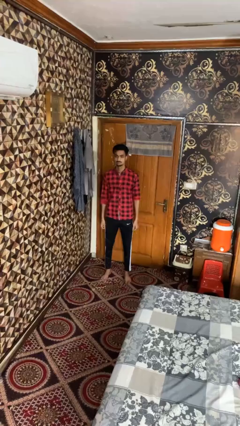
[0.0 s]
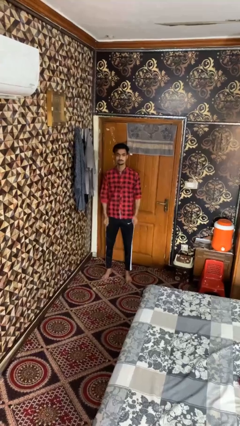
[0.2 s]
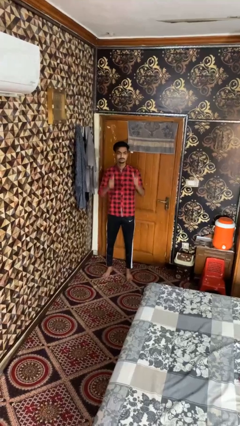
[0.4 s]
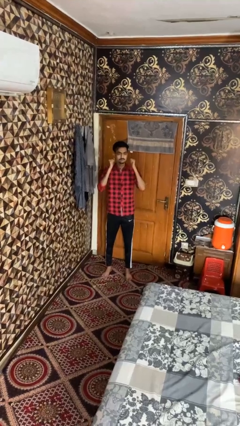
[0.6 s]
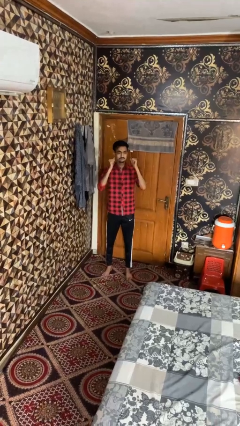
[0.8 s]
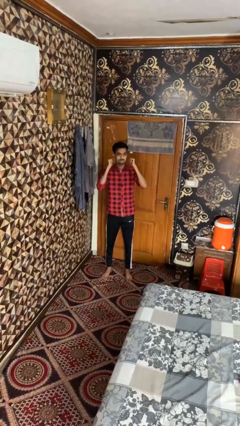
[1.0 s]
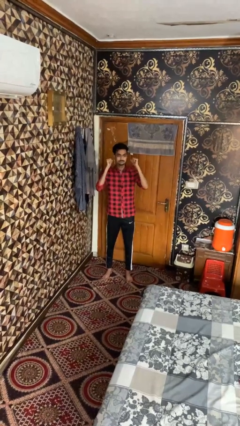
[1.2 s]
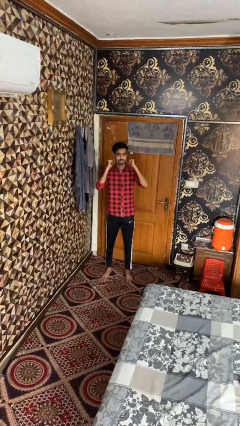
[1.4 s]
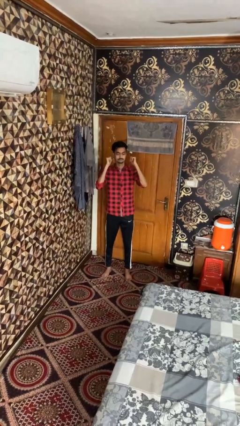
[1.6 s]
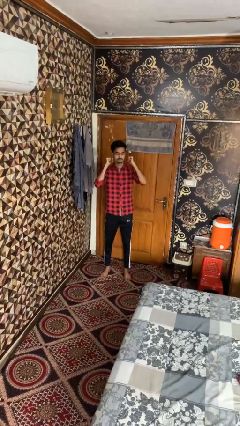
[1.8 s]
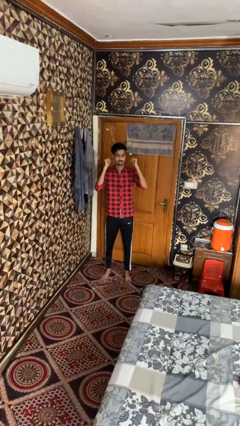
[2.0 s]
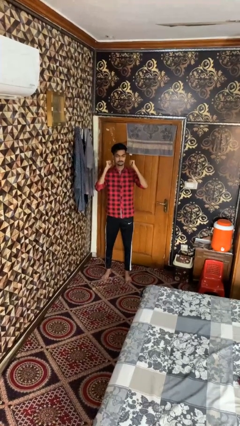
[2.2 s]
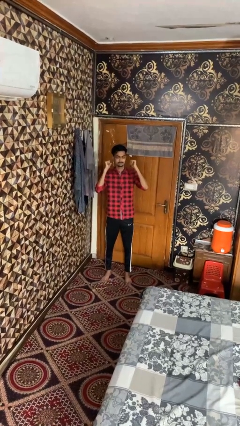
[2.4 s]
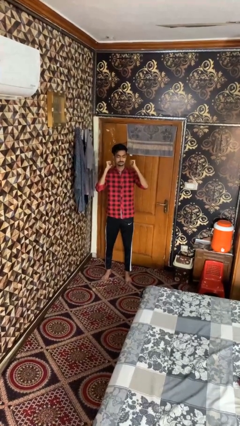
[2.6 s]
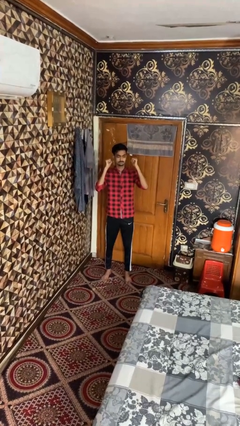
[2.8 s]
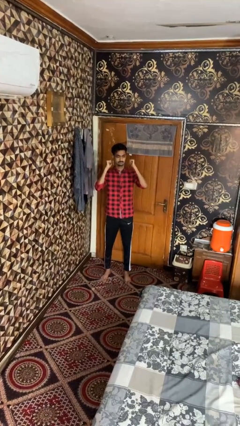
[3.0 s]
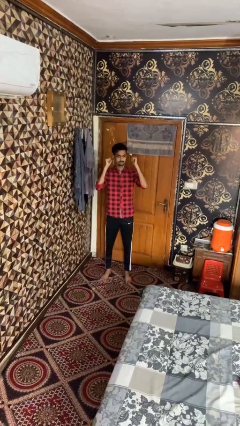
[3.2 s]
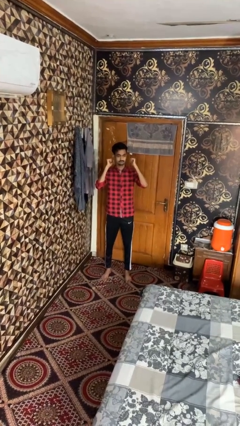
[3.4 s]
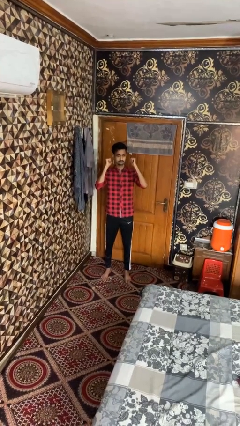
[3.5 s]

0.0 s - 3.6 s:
person gestures behind me

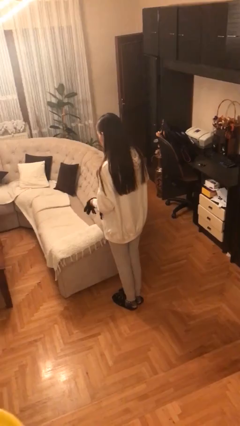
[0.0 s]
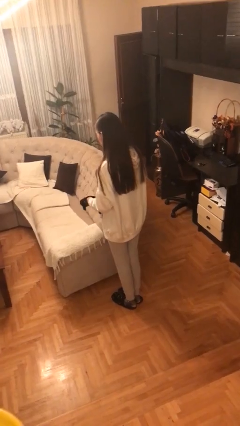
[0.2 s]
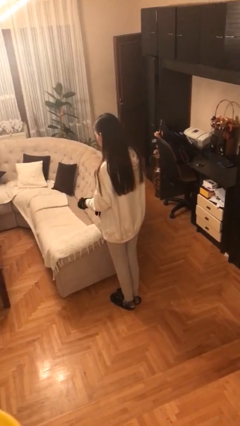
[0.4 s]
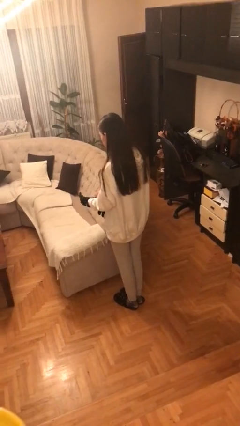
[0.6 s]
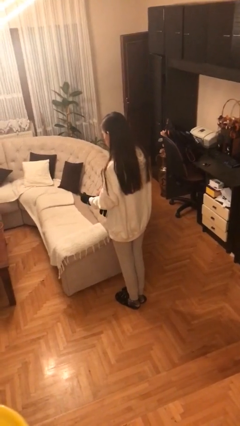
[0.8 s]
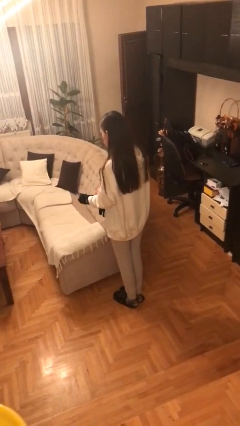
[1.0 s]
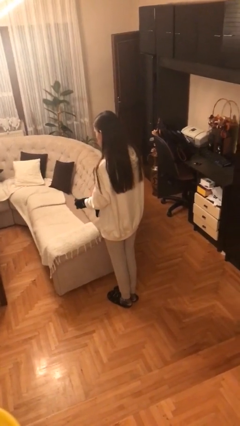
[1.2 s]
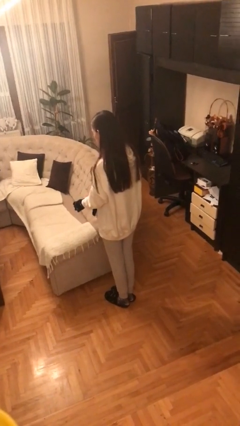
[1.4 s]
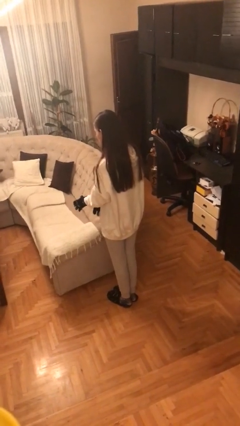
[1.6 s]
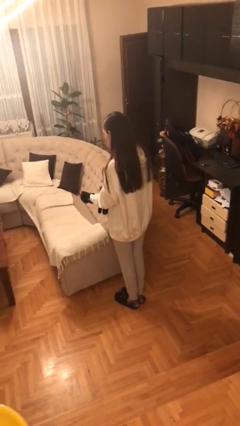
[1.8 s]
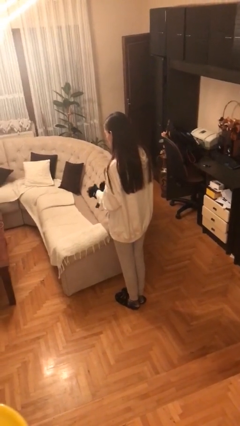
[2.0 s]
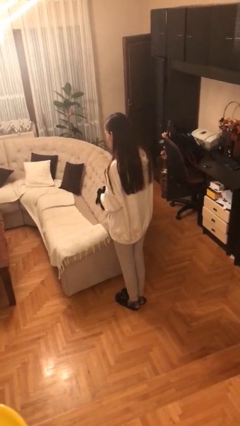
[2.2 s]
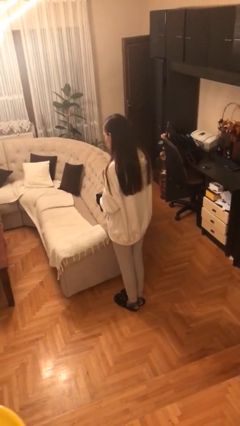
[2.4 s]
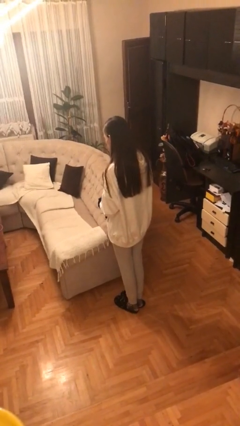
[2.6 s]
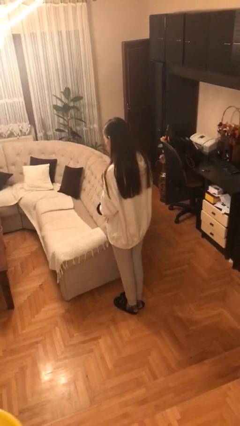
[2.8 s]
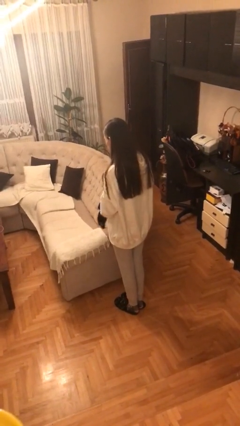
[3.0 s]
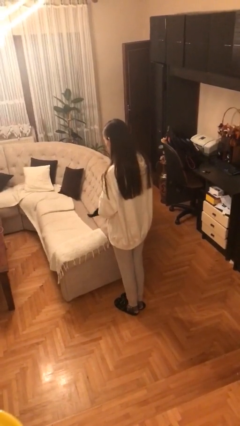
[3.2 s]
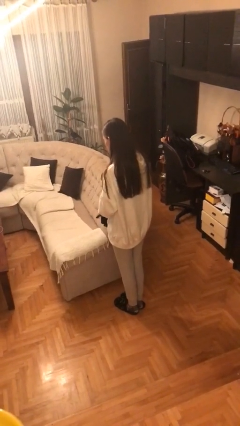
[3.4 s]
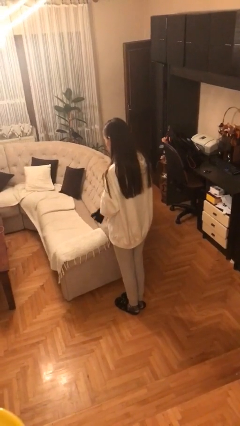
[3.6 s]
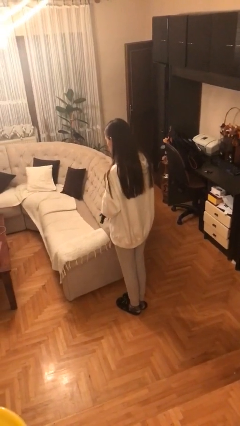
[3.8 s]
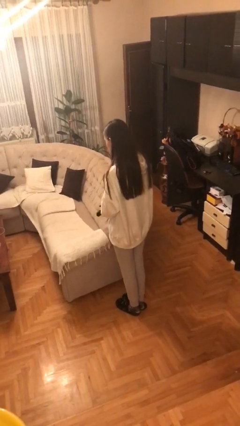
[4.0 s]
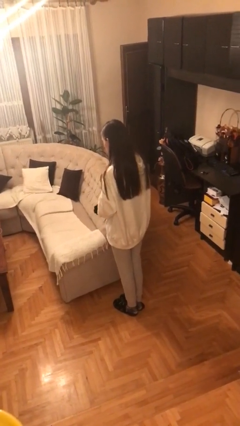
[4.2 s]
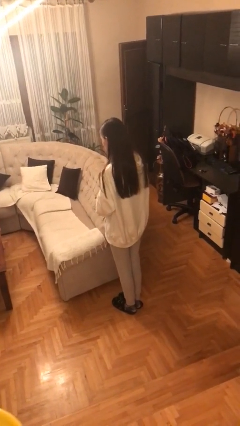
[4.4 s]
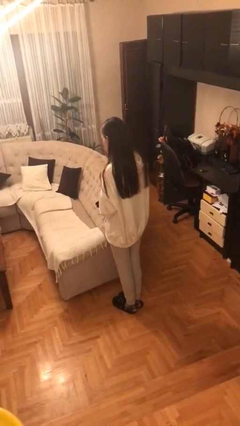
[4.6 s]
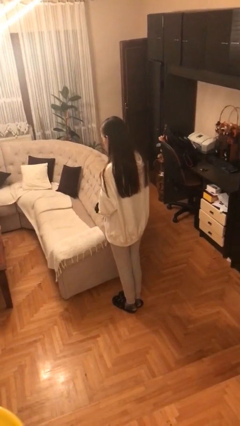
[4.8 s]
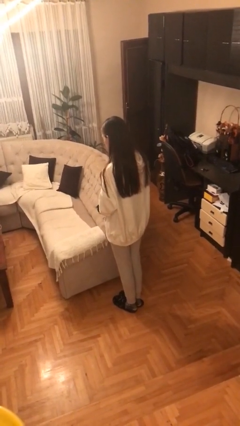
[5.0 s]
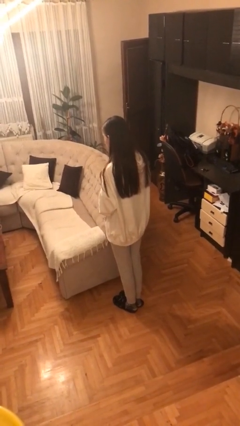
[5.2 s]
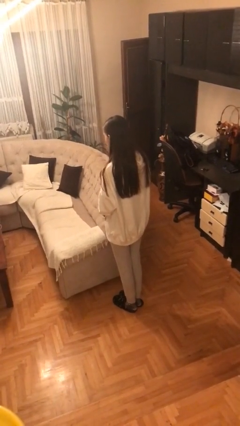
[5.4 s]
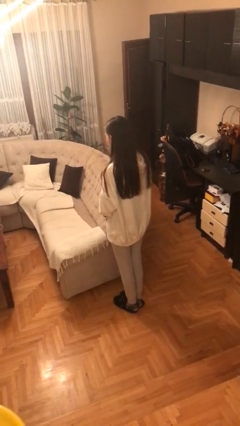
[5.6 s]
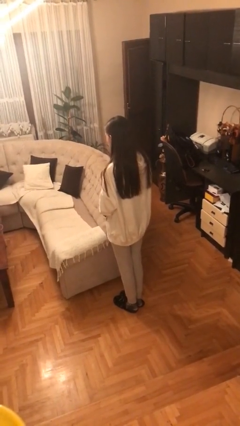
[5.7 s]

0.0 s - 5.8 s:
person puts on gloves

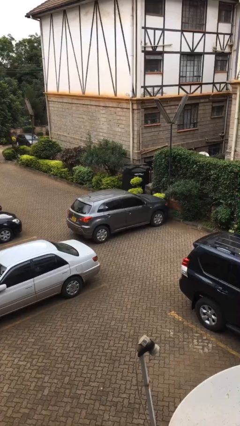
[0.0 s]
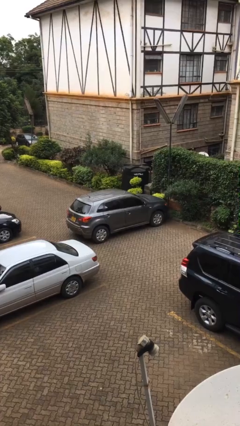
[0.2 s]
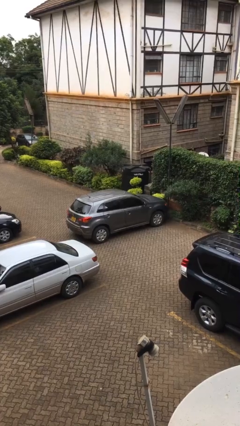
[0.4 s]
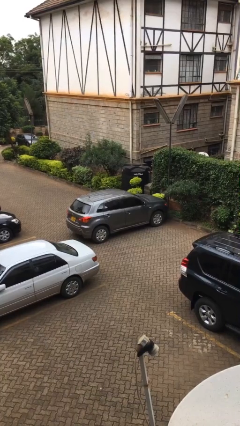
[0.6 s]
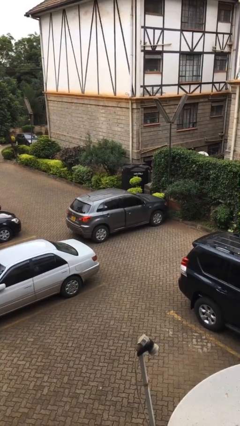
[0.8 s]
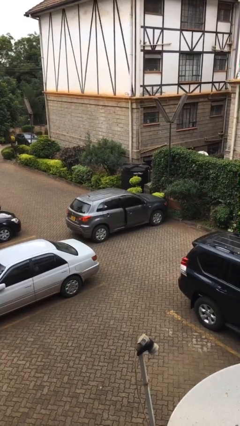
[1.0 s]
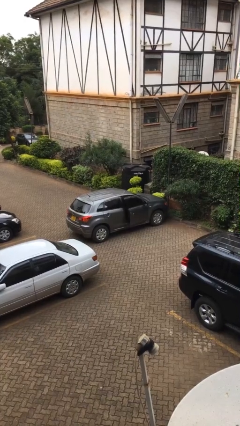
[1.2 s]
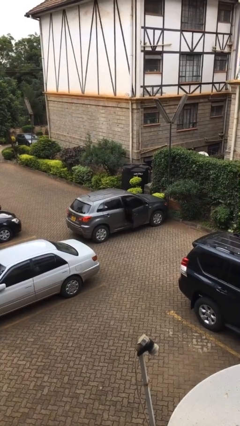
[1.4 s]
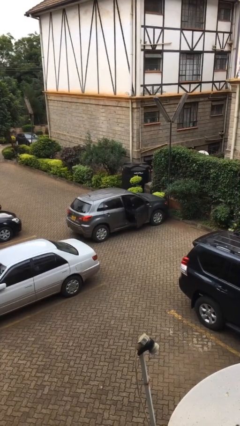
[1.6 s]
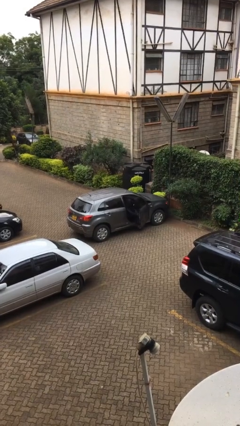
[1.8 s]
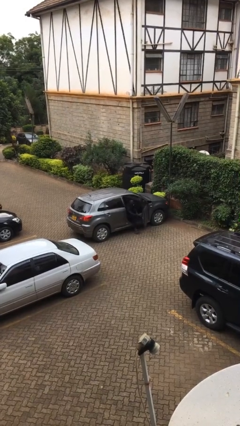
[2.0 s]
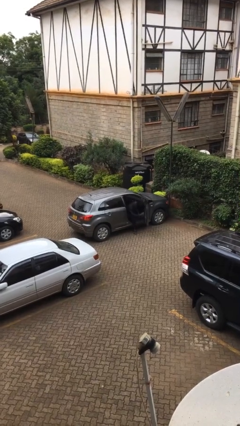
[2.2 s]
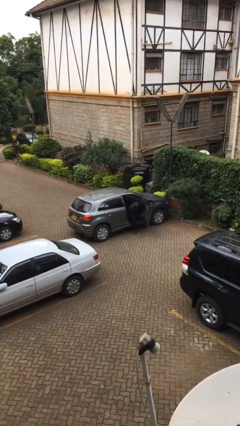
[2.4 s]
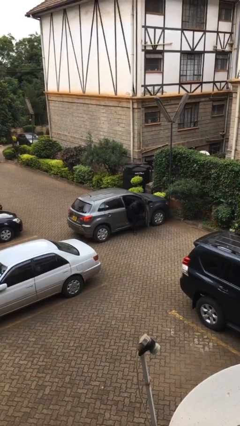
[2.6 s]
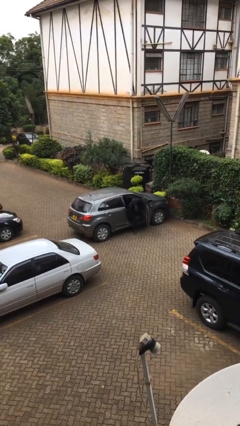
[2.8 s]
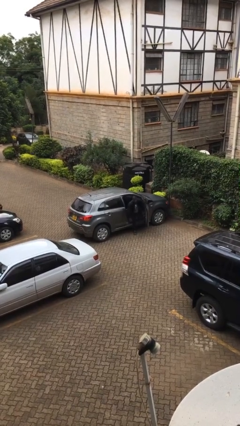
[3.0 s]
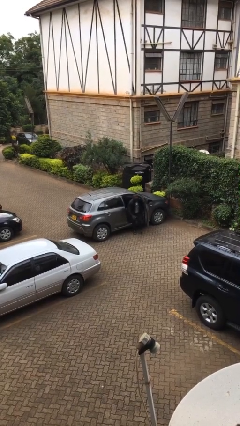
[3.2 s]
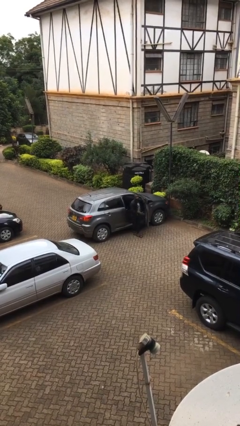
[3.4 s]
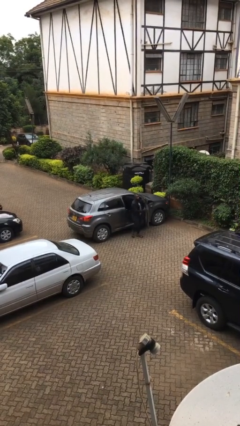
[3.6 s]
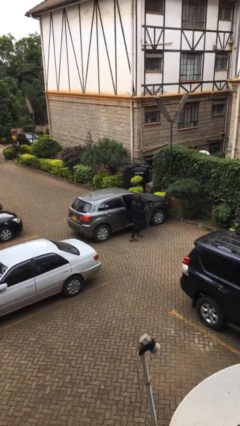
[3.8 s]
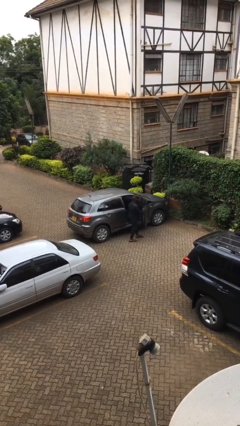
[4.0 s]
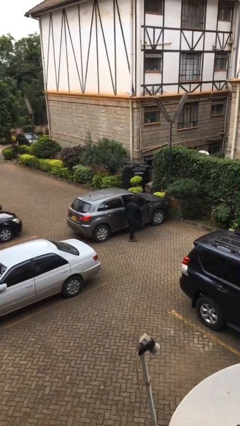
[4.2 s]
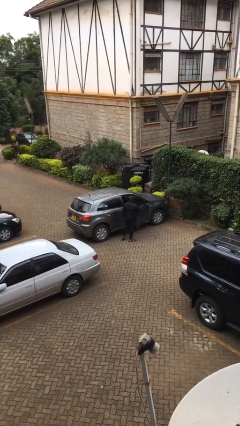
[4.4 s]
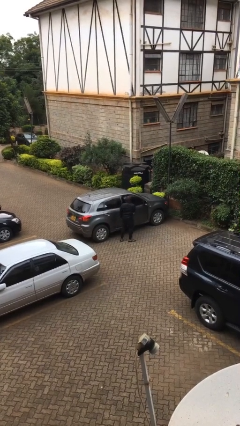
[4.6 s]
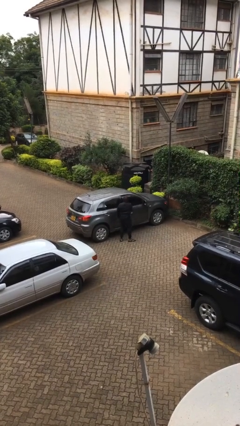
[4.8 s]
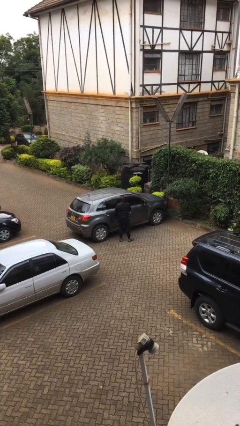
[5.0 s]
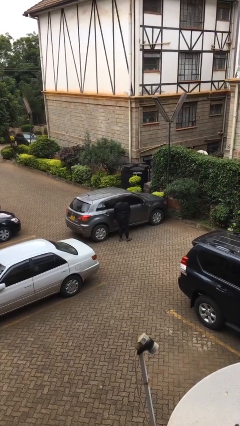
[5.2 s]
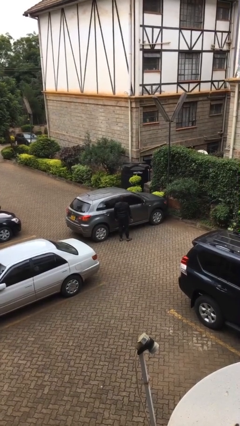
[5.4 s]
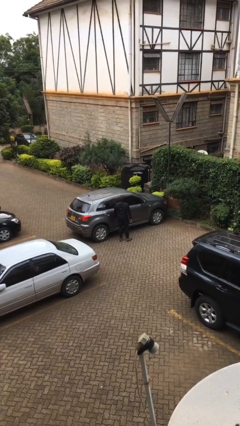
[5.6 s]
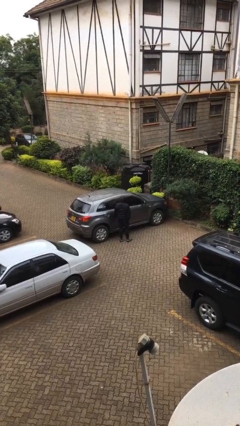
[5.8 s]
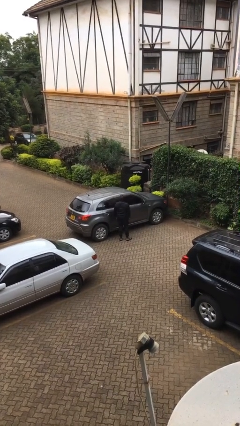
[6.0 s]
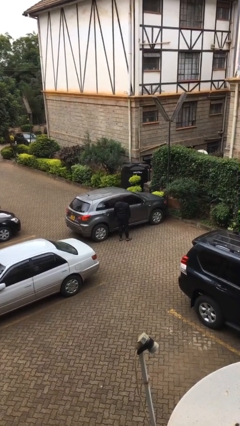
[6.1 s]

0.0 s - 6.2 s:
car drops off person

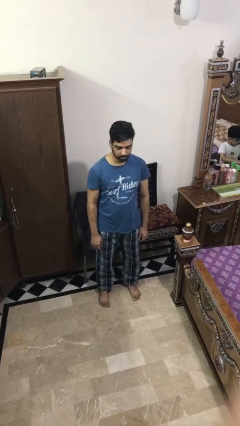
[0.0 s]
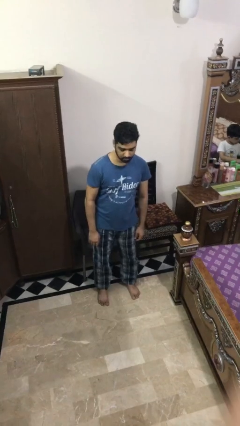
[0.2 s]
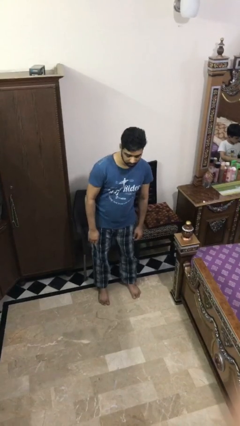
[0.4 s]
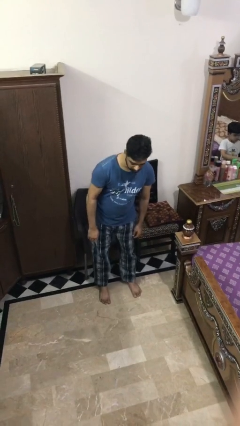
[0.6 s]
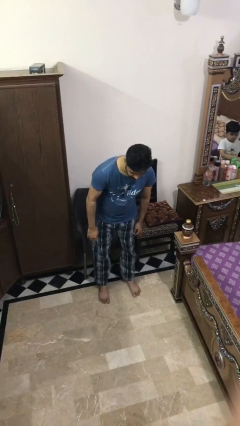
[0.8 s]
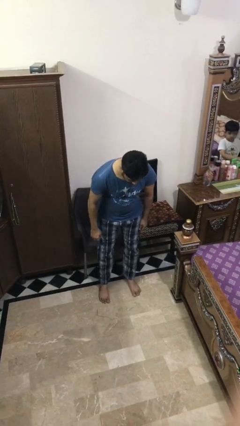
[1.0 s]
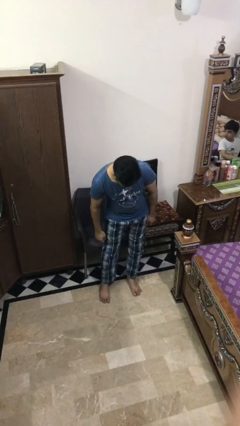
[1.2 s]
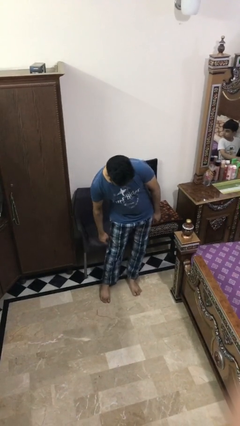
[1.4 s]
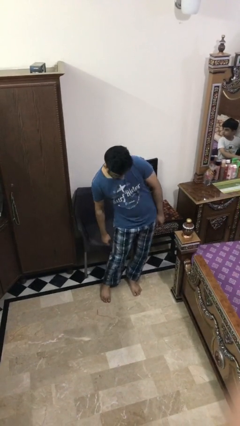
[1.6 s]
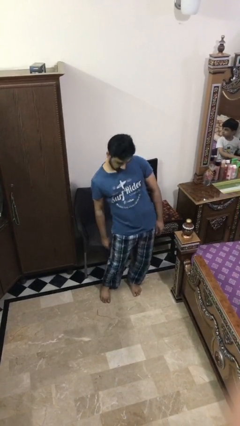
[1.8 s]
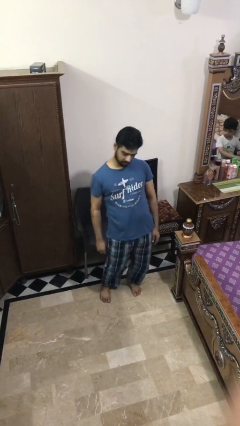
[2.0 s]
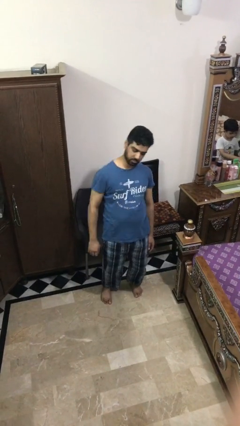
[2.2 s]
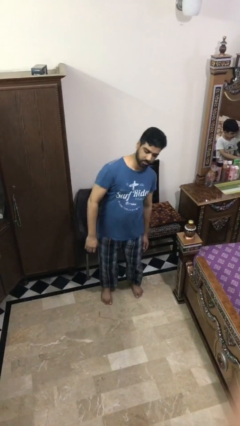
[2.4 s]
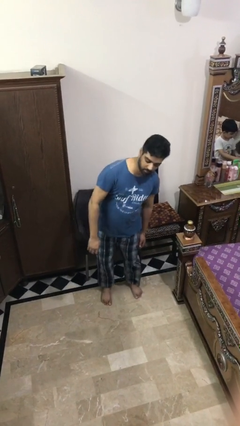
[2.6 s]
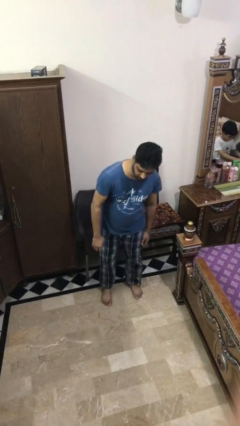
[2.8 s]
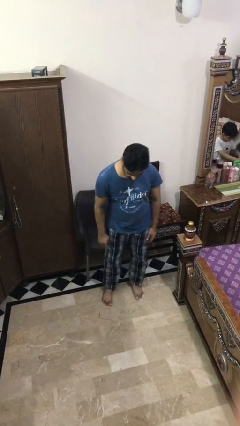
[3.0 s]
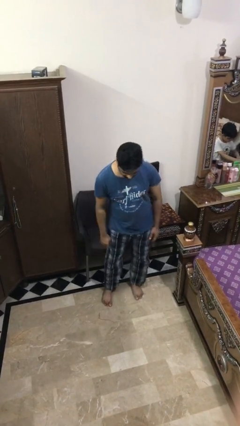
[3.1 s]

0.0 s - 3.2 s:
person wiggles hips
